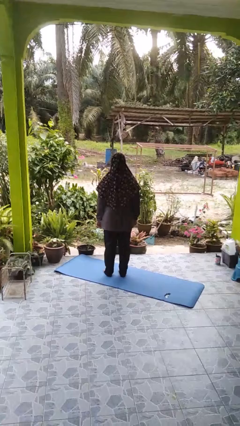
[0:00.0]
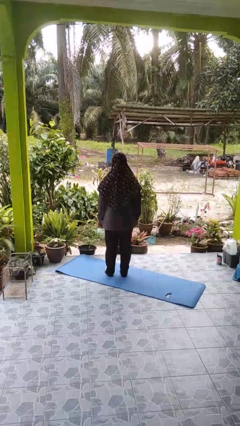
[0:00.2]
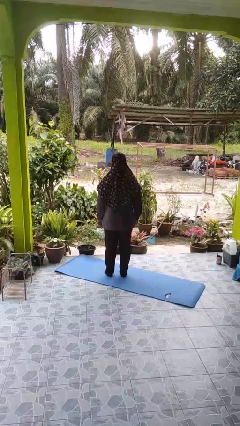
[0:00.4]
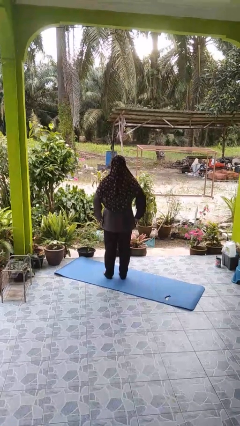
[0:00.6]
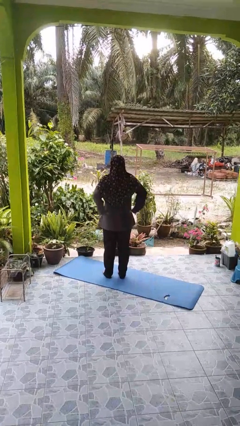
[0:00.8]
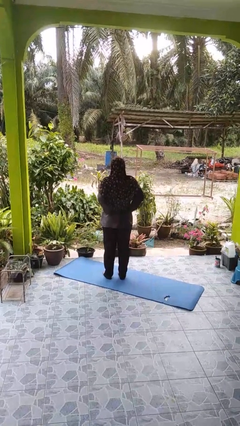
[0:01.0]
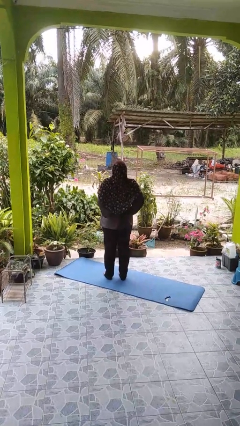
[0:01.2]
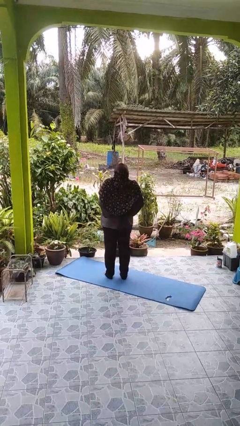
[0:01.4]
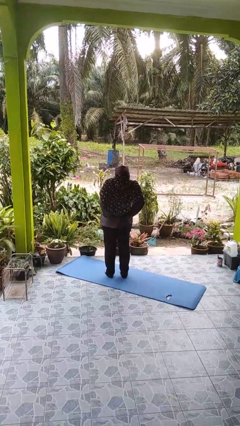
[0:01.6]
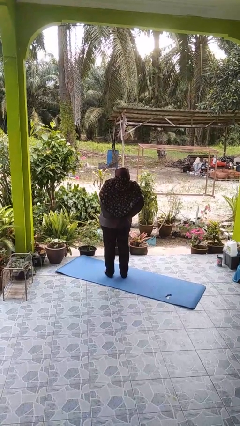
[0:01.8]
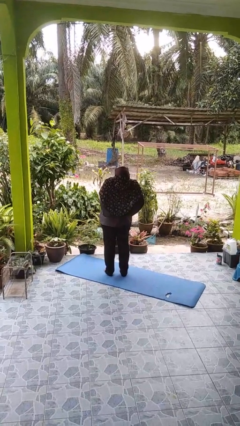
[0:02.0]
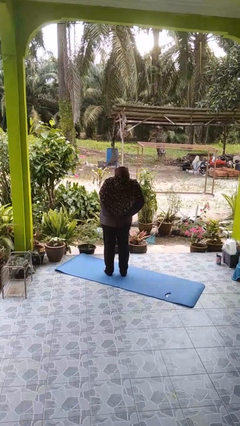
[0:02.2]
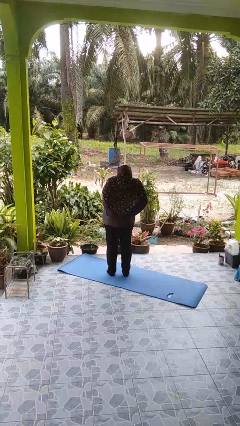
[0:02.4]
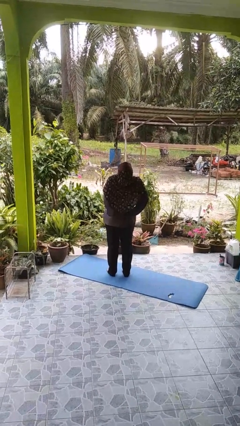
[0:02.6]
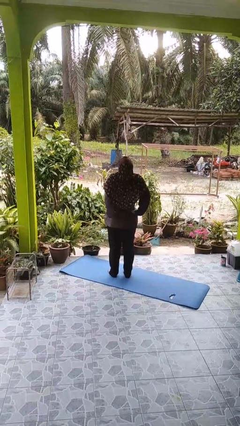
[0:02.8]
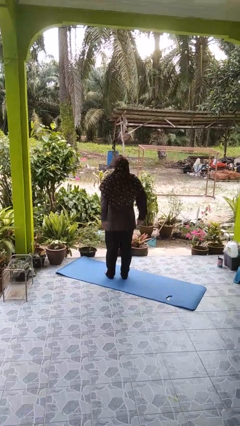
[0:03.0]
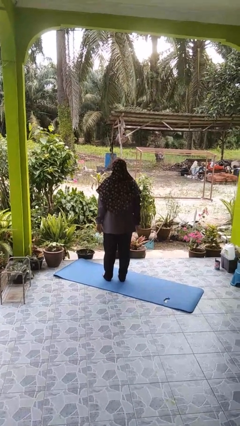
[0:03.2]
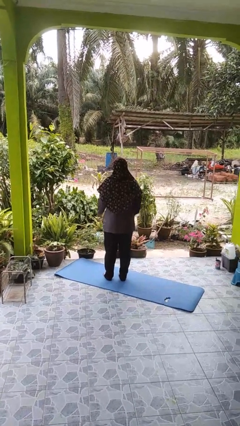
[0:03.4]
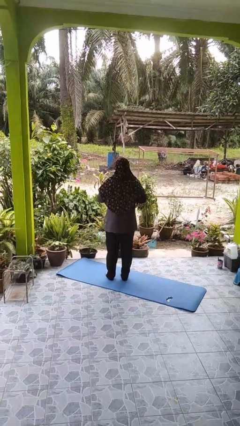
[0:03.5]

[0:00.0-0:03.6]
person stretches back

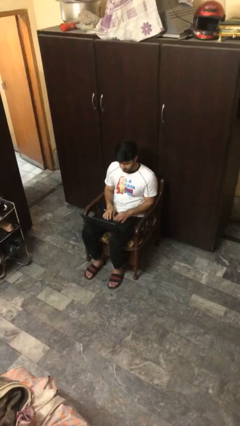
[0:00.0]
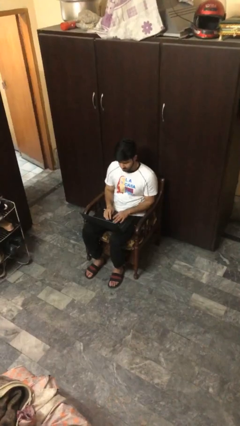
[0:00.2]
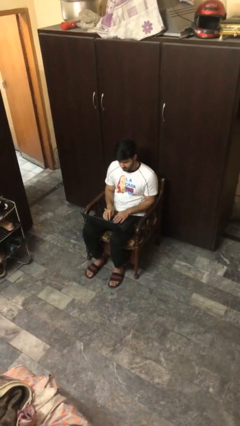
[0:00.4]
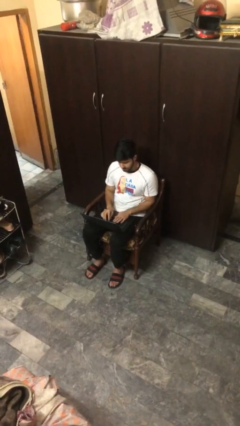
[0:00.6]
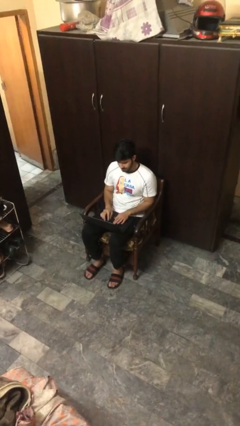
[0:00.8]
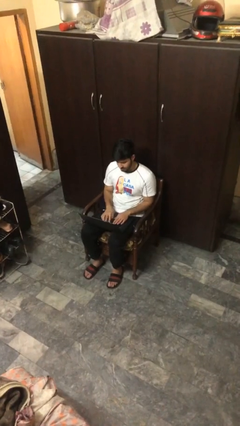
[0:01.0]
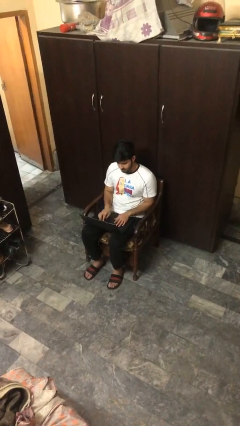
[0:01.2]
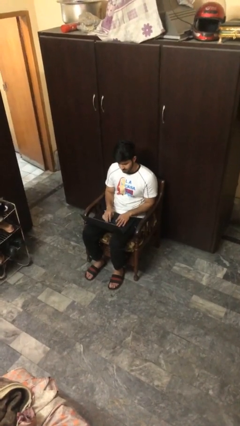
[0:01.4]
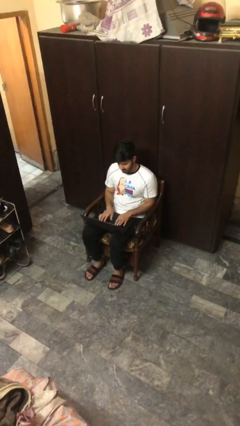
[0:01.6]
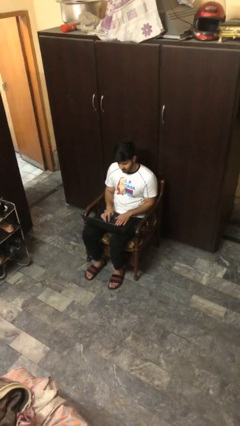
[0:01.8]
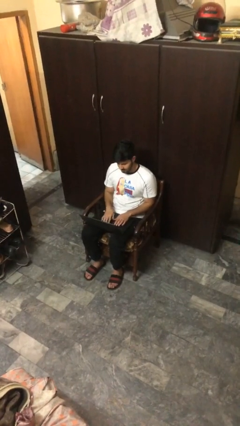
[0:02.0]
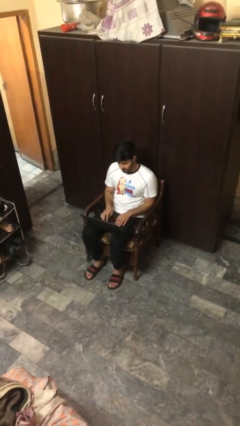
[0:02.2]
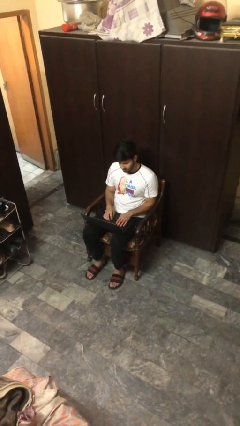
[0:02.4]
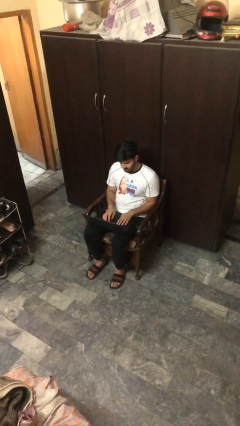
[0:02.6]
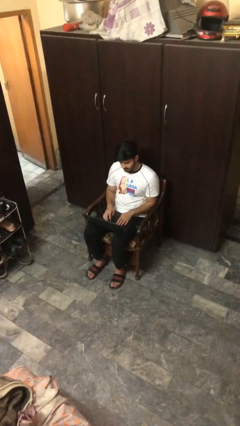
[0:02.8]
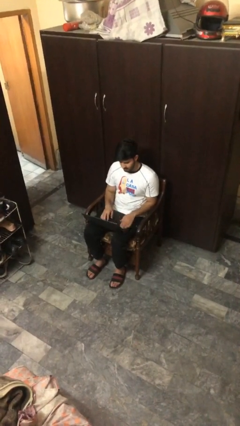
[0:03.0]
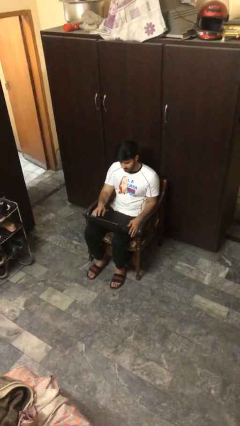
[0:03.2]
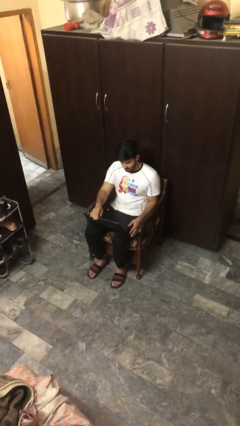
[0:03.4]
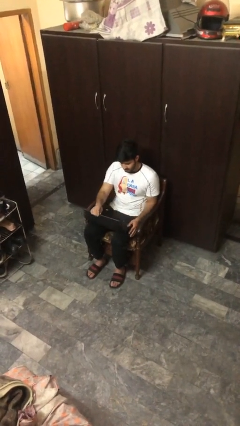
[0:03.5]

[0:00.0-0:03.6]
person interacts with laptop

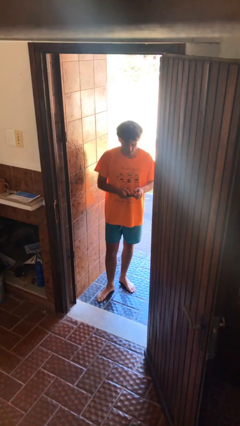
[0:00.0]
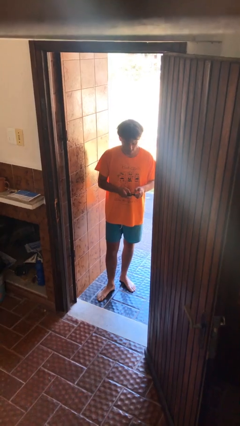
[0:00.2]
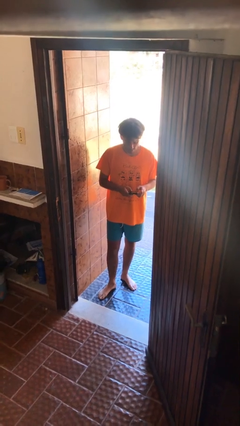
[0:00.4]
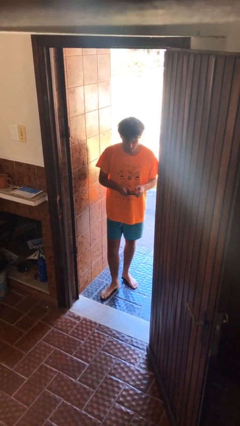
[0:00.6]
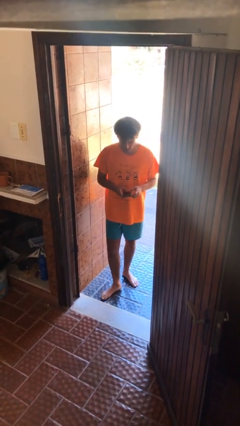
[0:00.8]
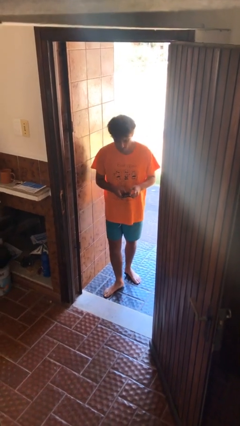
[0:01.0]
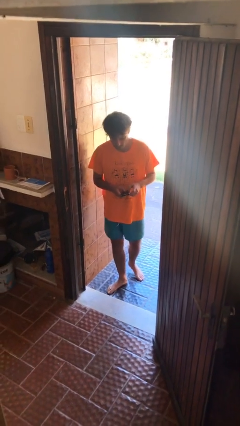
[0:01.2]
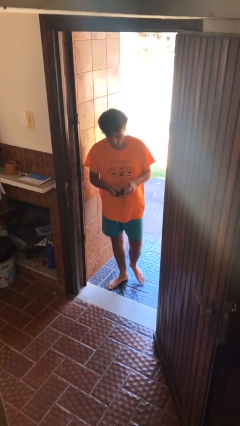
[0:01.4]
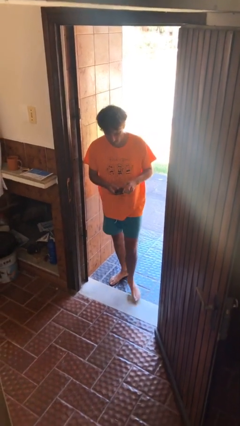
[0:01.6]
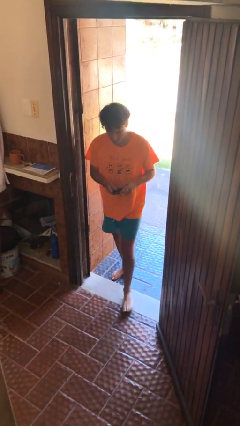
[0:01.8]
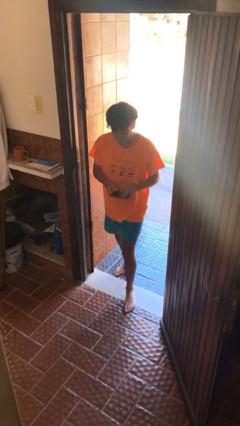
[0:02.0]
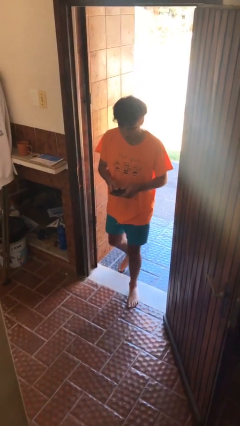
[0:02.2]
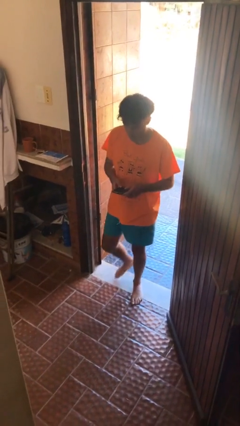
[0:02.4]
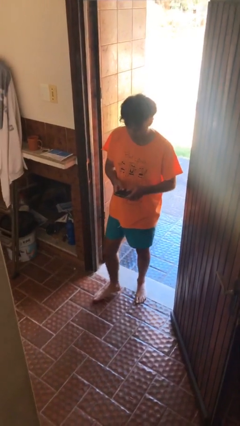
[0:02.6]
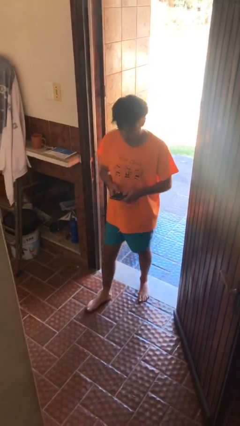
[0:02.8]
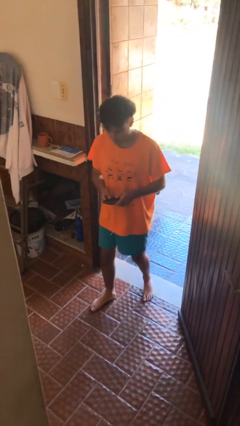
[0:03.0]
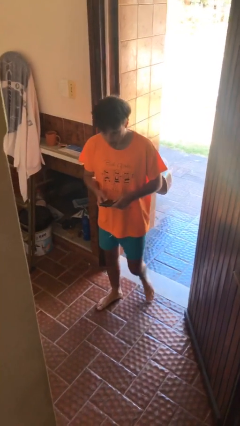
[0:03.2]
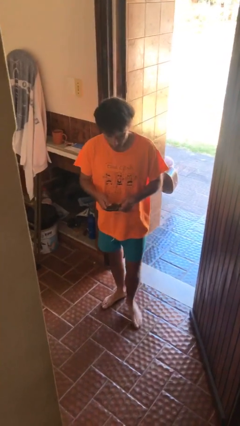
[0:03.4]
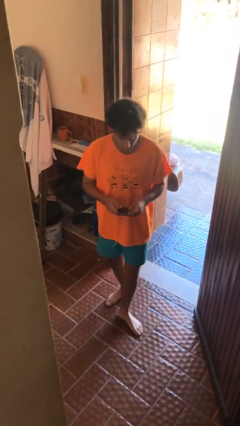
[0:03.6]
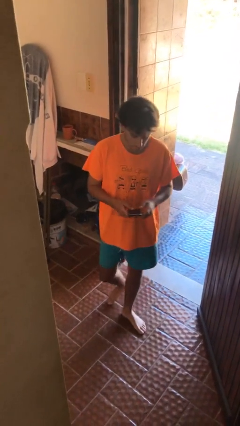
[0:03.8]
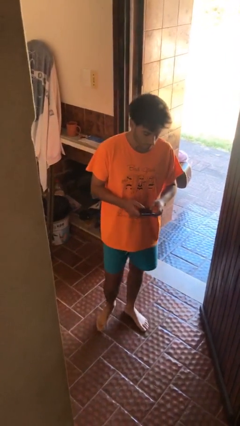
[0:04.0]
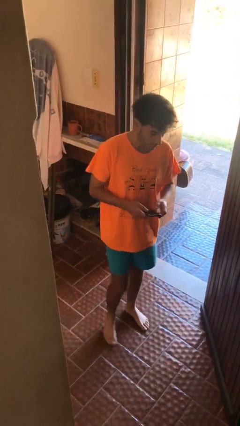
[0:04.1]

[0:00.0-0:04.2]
person enters scene through structure

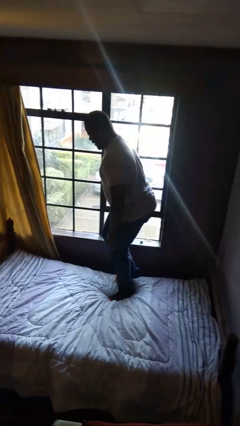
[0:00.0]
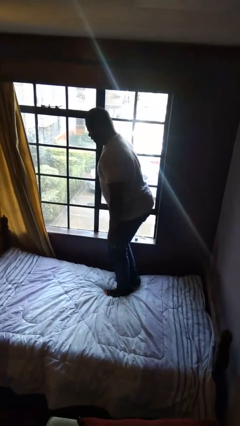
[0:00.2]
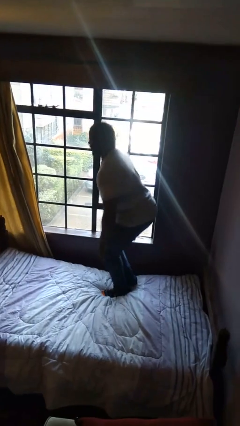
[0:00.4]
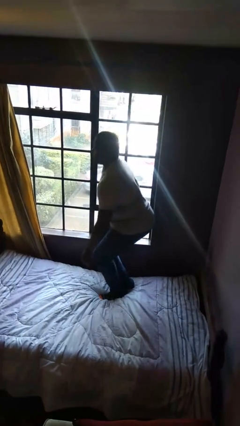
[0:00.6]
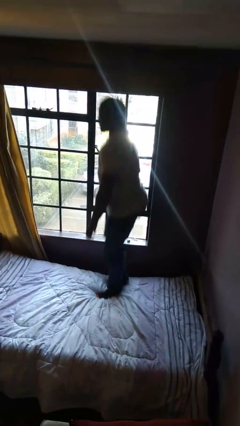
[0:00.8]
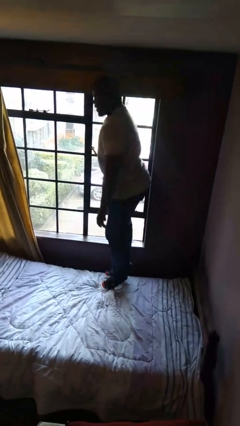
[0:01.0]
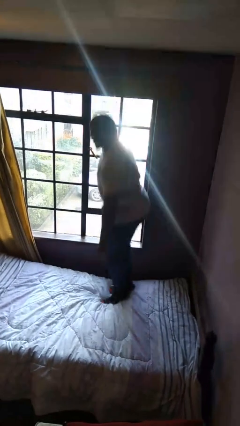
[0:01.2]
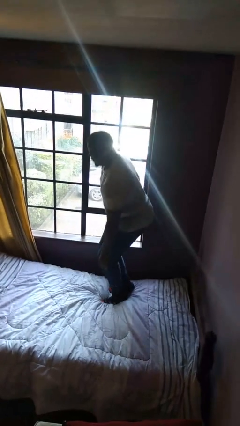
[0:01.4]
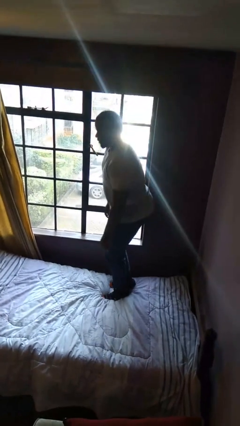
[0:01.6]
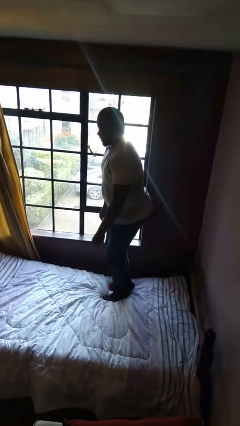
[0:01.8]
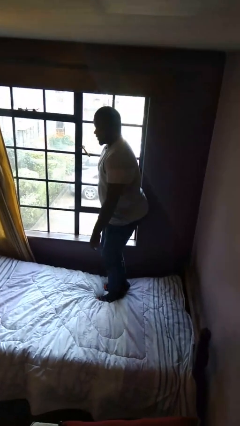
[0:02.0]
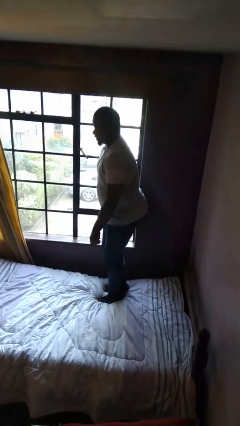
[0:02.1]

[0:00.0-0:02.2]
person jumps on bed

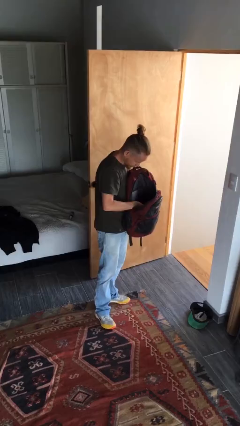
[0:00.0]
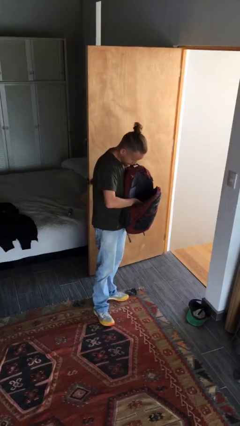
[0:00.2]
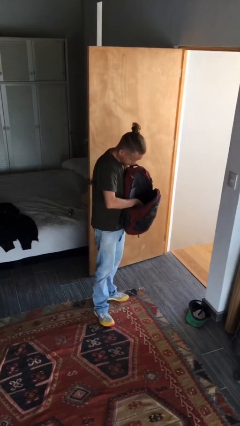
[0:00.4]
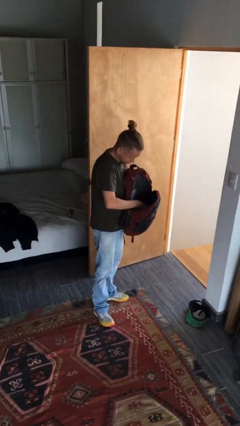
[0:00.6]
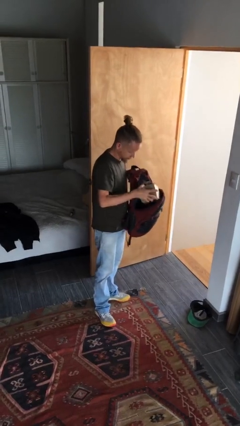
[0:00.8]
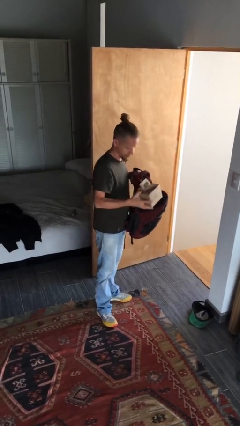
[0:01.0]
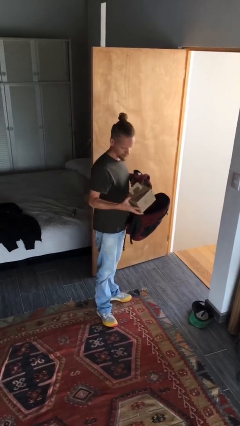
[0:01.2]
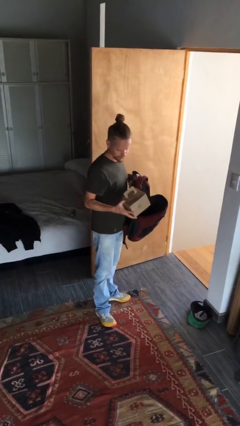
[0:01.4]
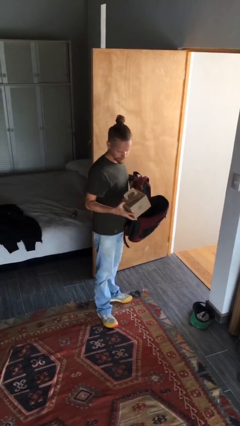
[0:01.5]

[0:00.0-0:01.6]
person takes object from backpack

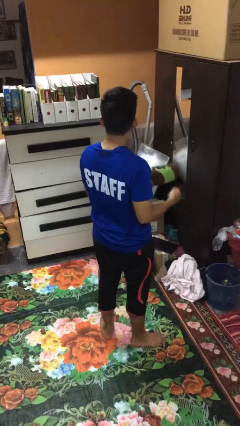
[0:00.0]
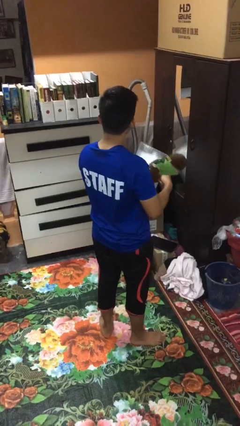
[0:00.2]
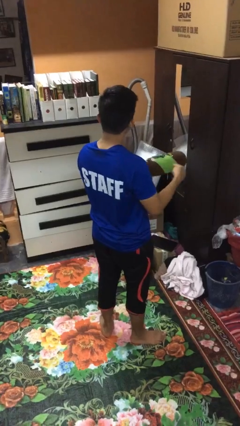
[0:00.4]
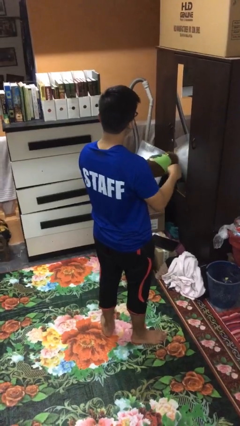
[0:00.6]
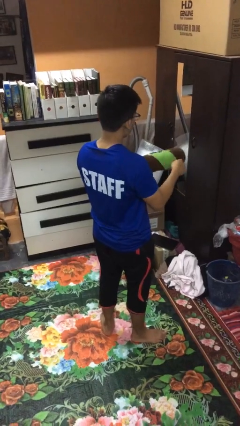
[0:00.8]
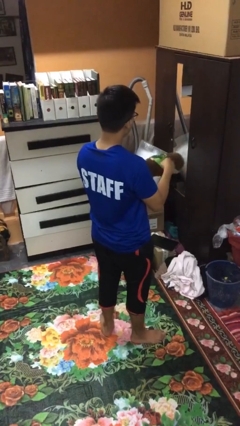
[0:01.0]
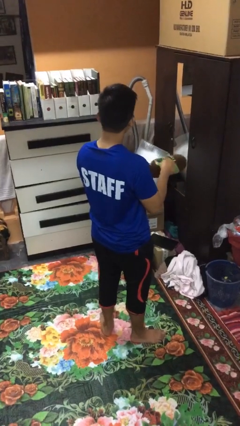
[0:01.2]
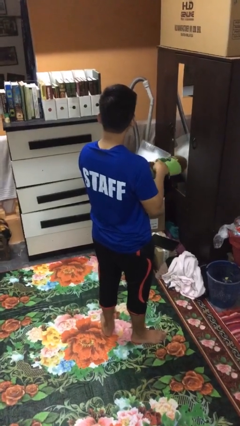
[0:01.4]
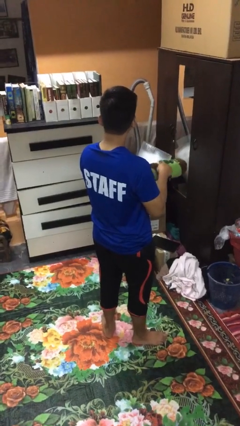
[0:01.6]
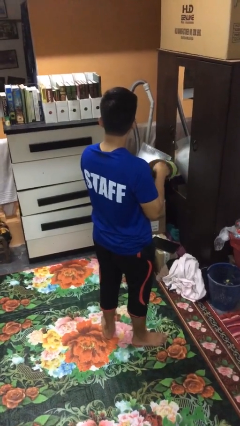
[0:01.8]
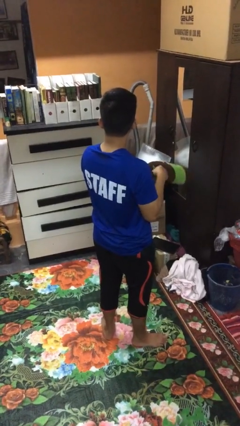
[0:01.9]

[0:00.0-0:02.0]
person taps object with finger
